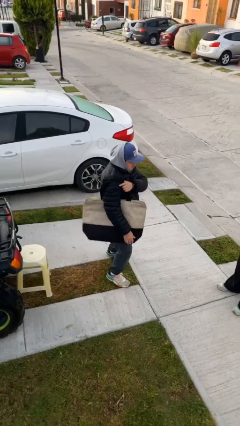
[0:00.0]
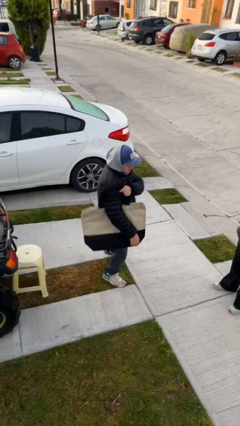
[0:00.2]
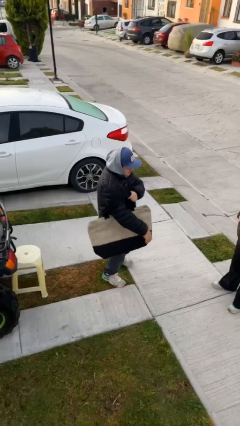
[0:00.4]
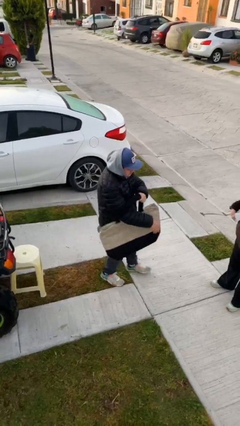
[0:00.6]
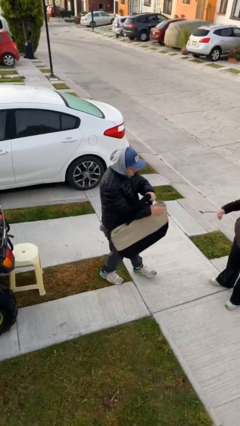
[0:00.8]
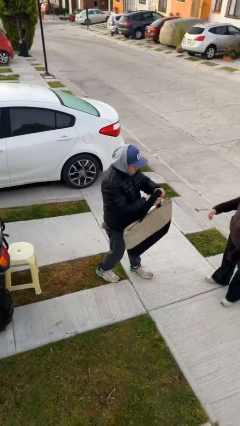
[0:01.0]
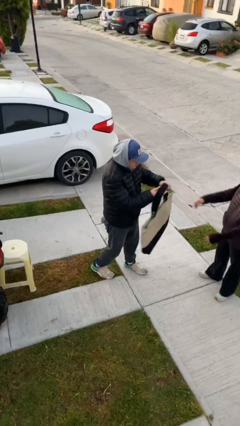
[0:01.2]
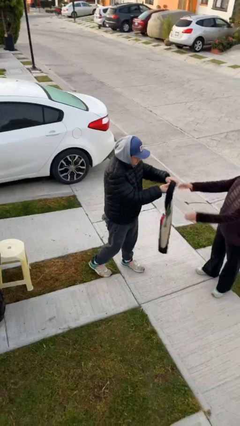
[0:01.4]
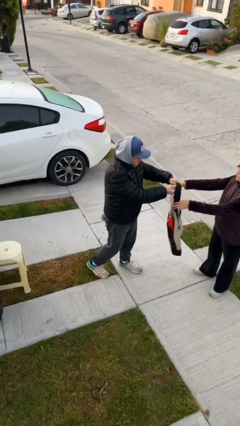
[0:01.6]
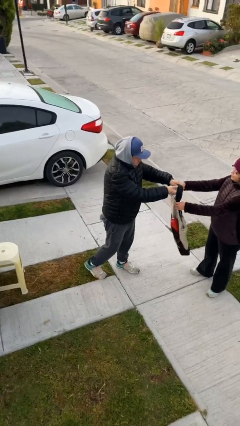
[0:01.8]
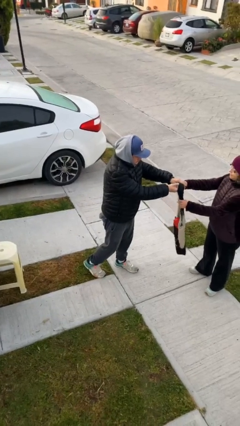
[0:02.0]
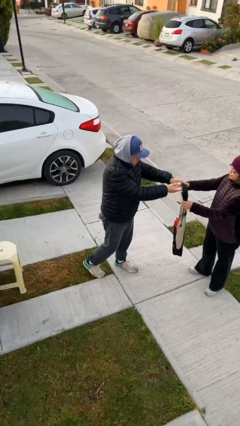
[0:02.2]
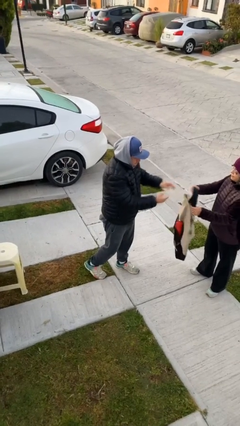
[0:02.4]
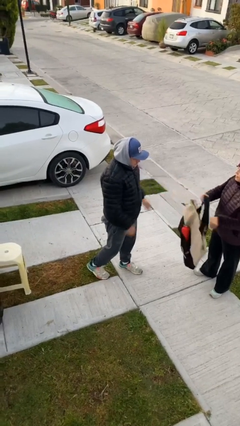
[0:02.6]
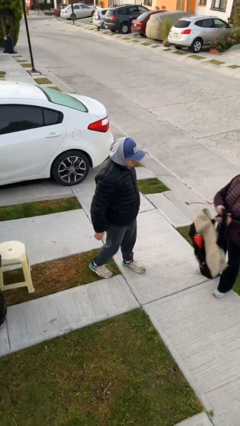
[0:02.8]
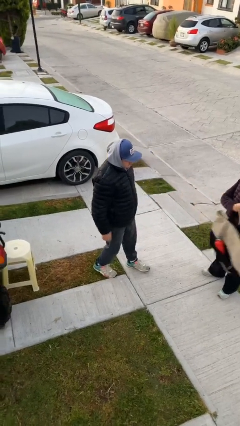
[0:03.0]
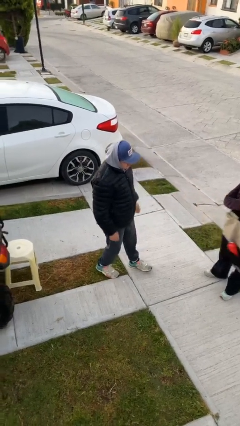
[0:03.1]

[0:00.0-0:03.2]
person transfers object to person

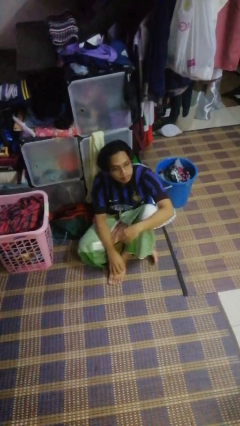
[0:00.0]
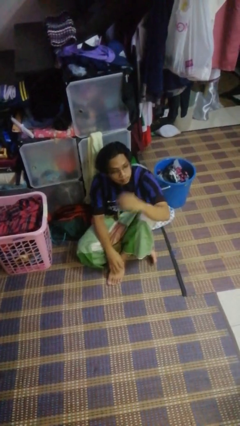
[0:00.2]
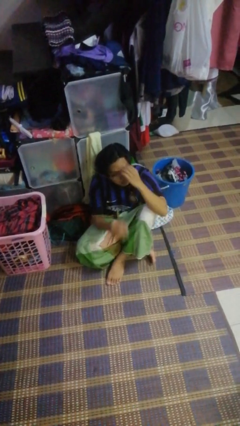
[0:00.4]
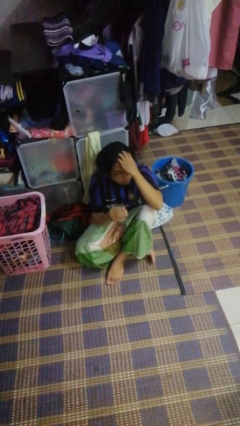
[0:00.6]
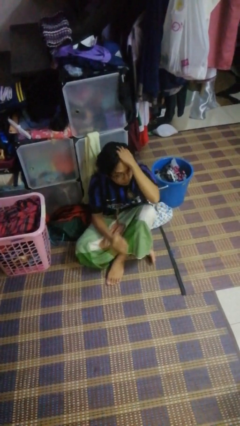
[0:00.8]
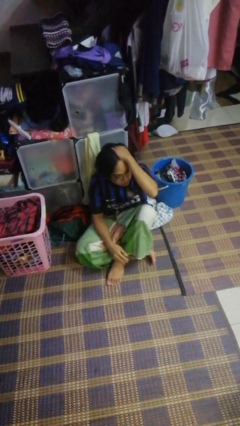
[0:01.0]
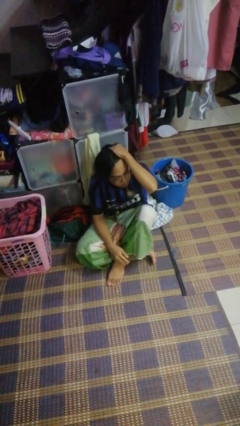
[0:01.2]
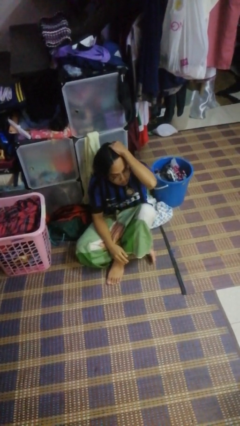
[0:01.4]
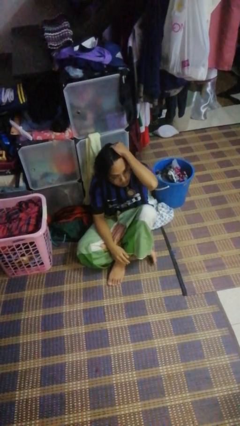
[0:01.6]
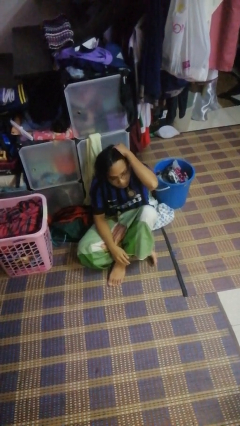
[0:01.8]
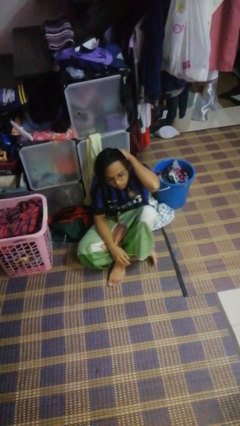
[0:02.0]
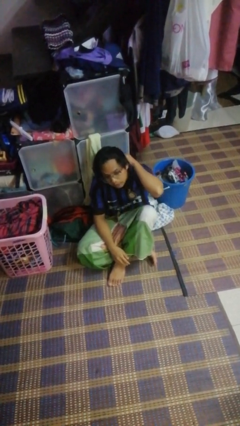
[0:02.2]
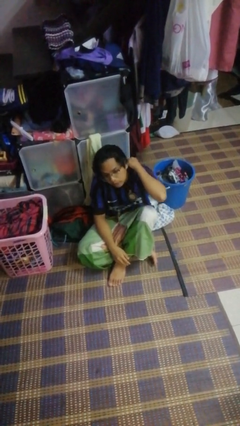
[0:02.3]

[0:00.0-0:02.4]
person strokes hair

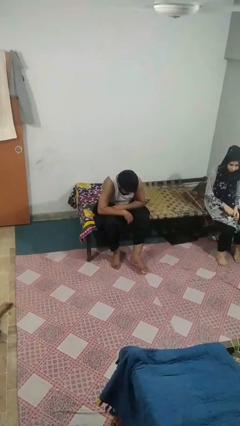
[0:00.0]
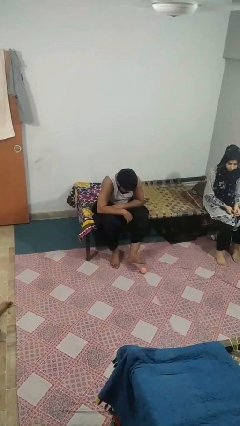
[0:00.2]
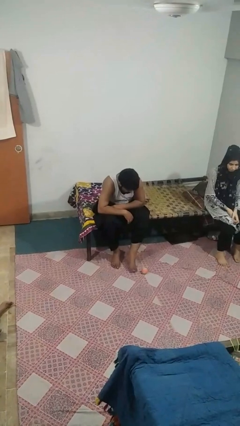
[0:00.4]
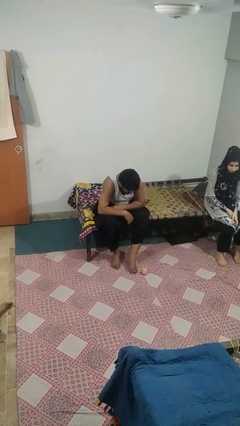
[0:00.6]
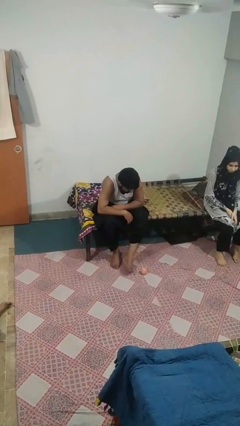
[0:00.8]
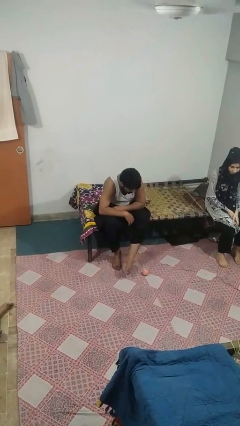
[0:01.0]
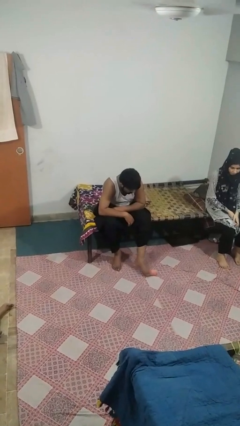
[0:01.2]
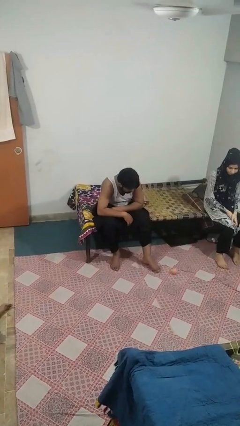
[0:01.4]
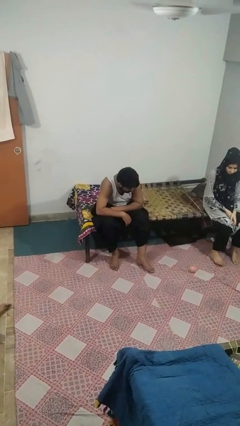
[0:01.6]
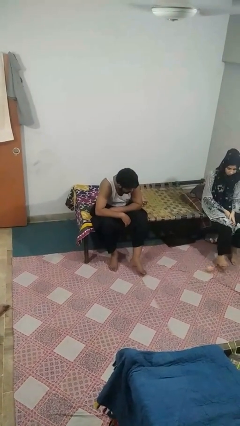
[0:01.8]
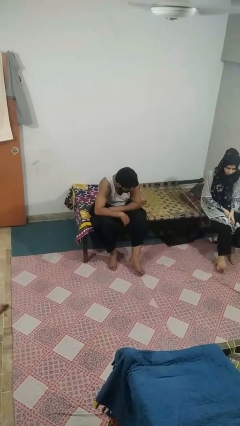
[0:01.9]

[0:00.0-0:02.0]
person kicks object to person

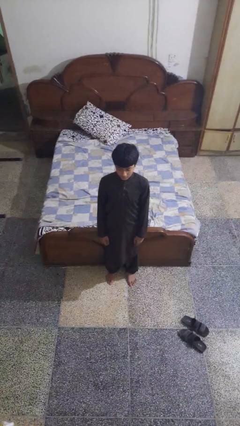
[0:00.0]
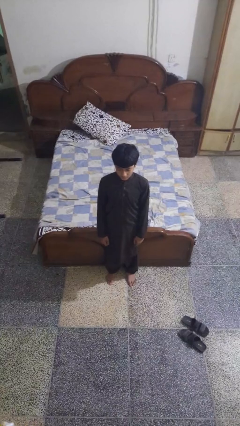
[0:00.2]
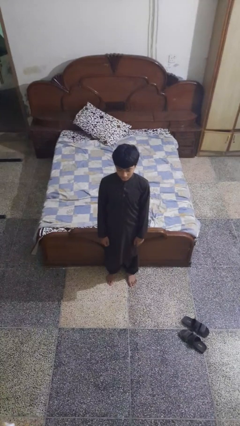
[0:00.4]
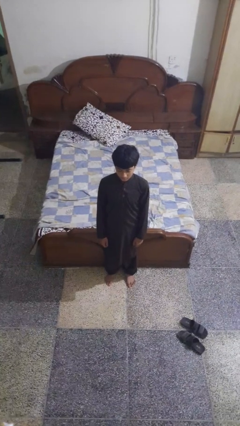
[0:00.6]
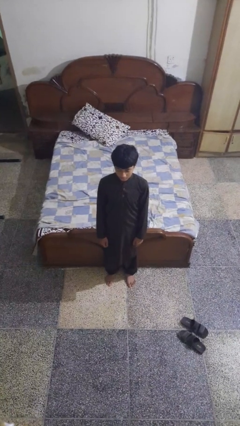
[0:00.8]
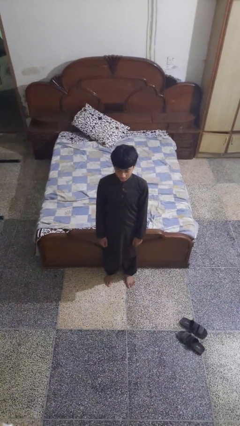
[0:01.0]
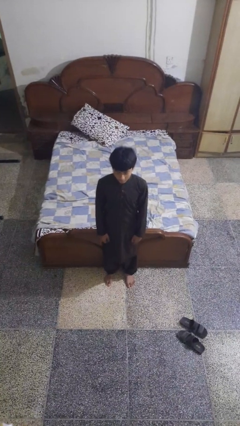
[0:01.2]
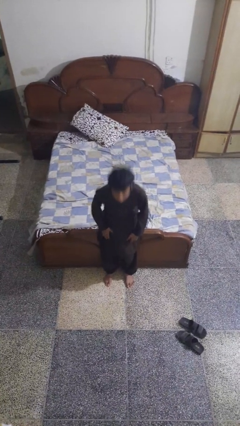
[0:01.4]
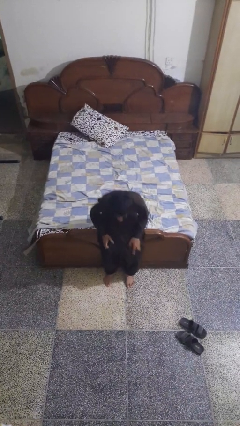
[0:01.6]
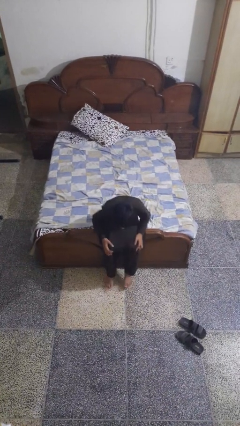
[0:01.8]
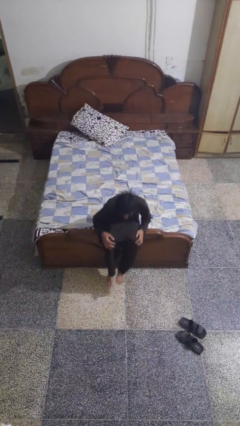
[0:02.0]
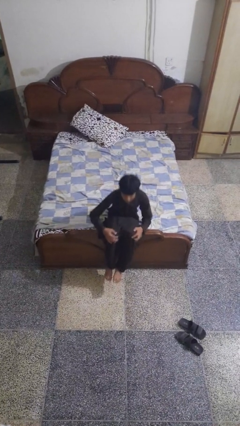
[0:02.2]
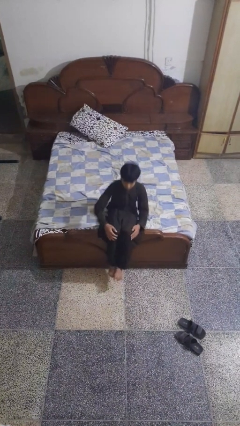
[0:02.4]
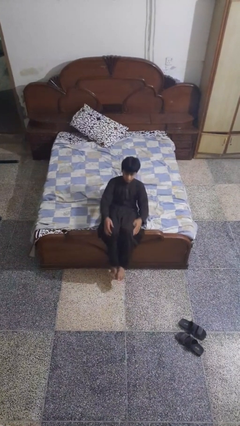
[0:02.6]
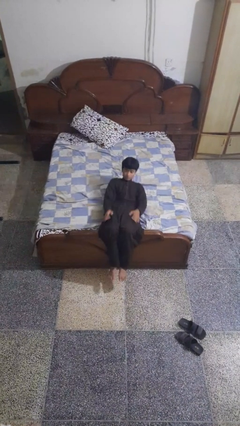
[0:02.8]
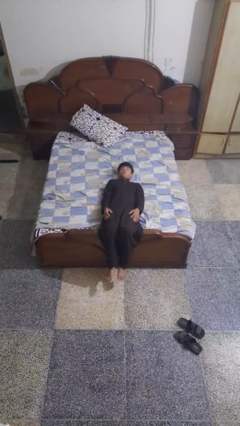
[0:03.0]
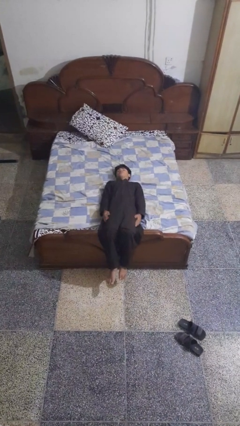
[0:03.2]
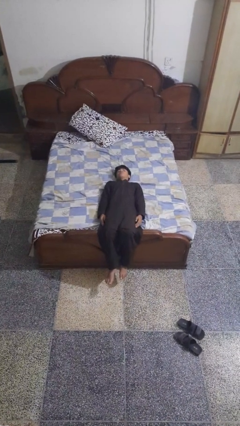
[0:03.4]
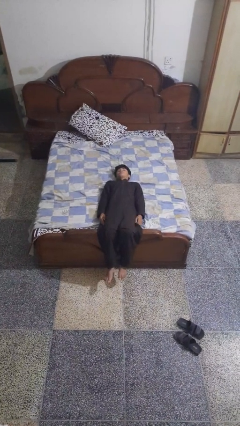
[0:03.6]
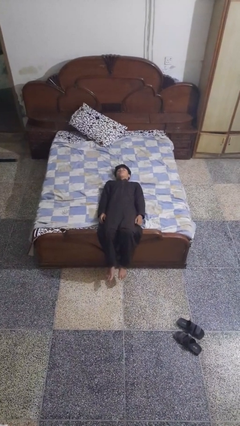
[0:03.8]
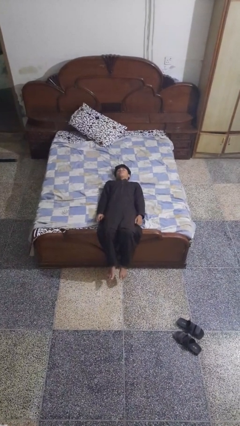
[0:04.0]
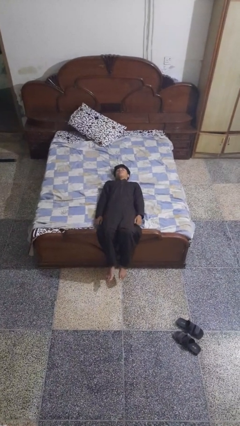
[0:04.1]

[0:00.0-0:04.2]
person lies down on bed

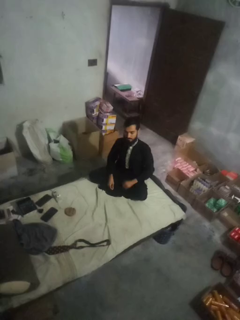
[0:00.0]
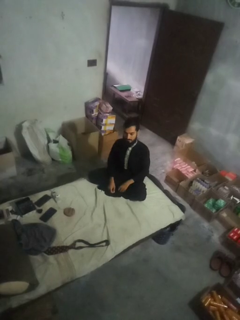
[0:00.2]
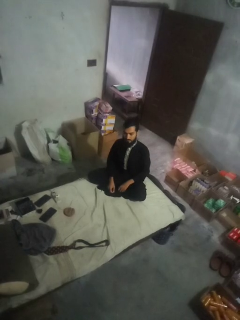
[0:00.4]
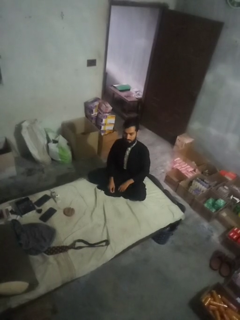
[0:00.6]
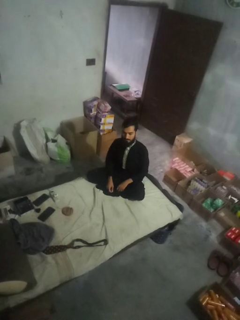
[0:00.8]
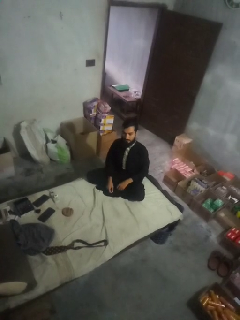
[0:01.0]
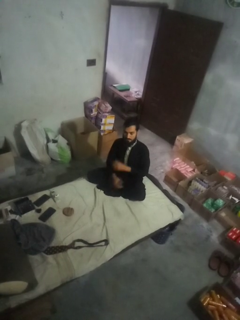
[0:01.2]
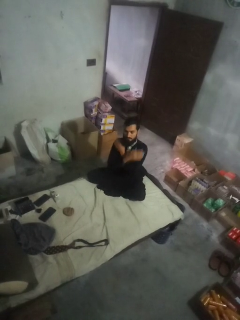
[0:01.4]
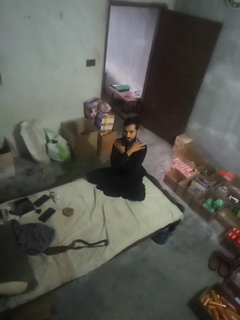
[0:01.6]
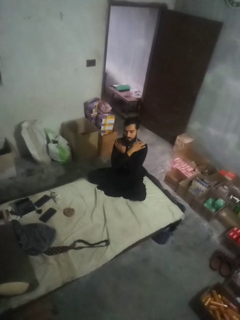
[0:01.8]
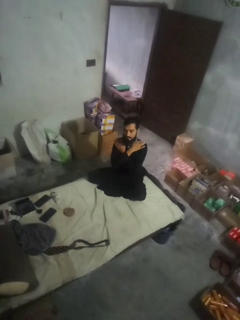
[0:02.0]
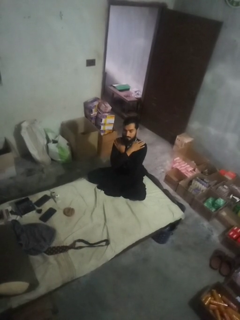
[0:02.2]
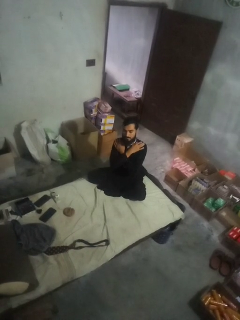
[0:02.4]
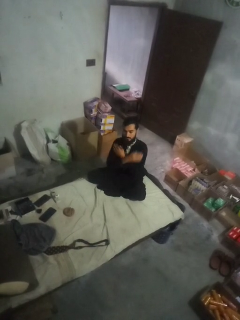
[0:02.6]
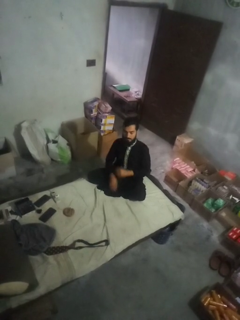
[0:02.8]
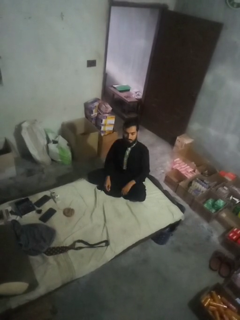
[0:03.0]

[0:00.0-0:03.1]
person gestures arms x

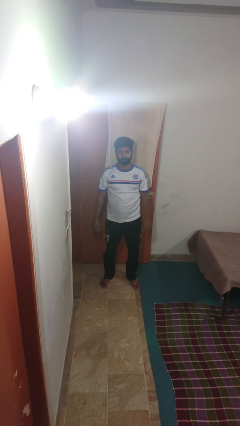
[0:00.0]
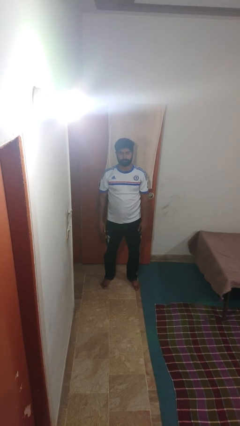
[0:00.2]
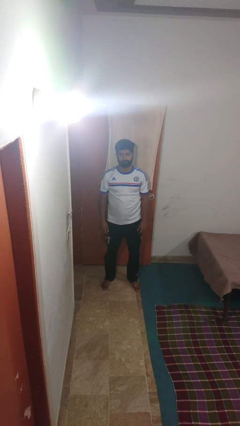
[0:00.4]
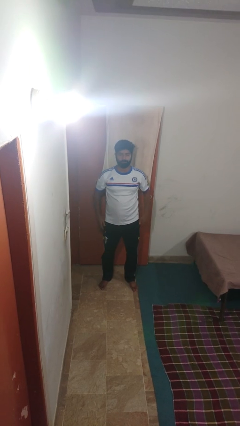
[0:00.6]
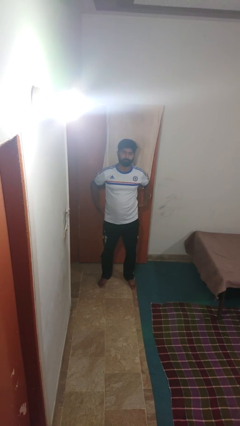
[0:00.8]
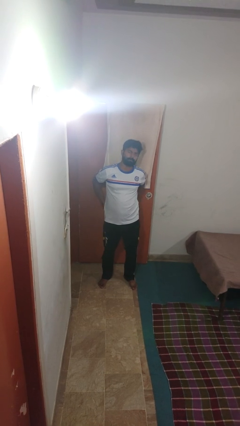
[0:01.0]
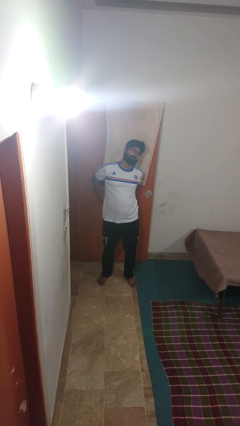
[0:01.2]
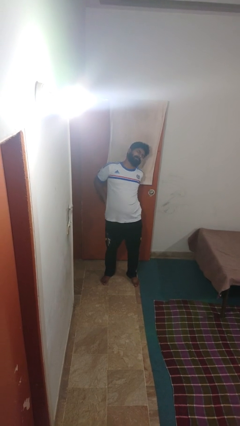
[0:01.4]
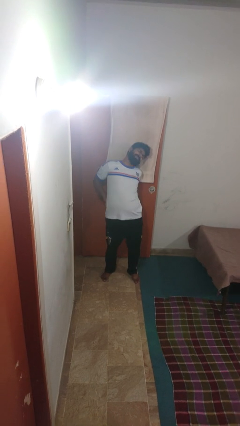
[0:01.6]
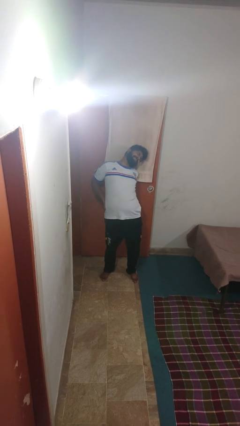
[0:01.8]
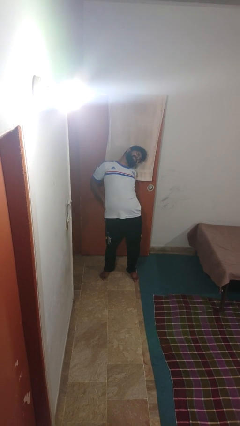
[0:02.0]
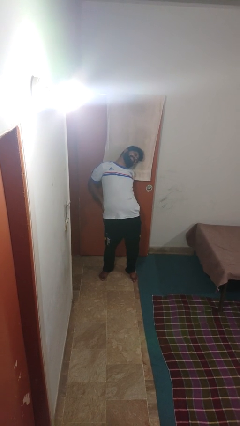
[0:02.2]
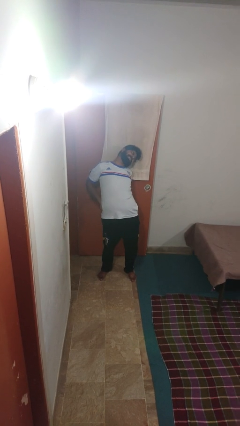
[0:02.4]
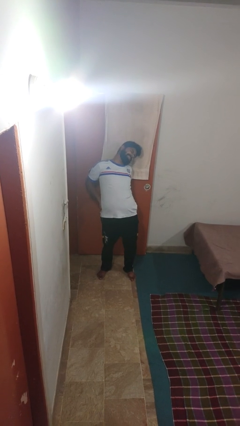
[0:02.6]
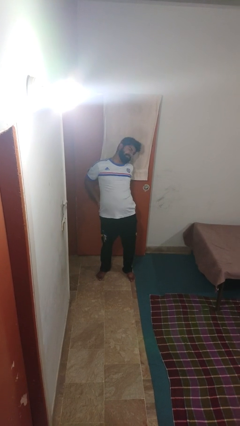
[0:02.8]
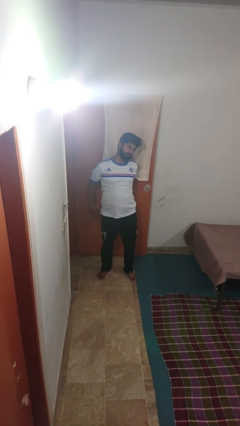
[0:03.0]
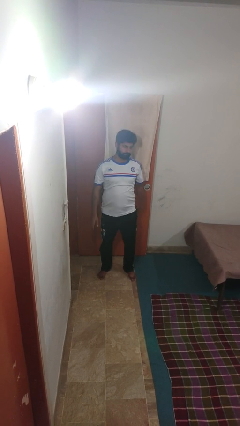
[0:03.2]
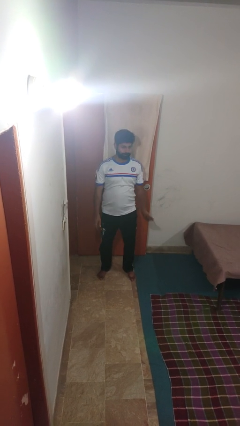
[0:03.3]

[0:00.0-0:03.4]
person stretches back
